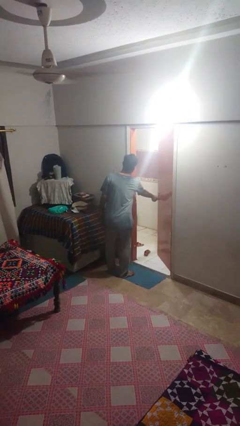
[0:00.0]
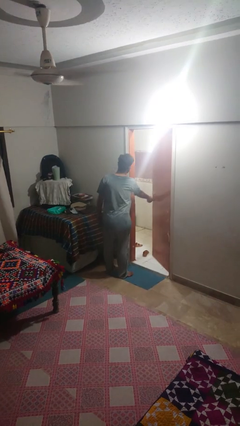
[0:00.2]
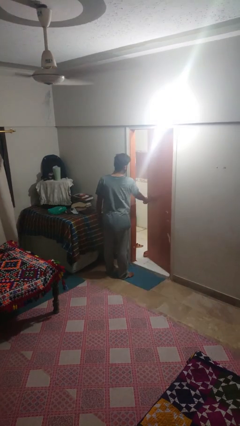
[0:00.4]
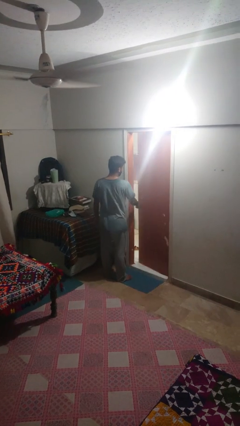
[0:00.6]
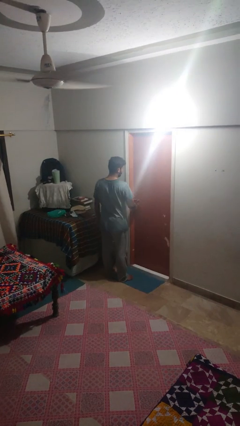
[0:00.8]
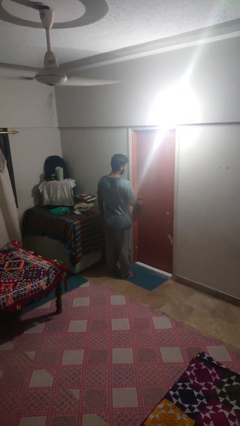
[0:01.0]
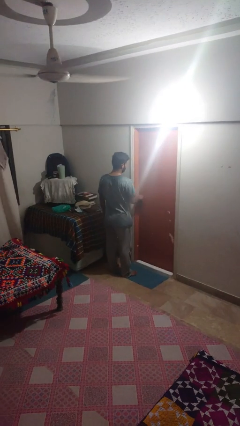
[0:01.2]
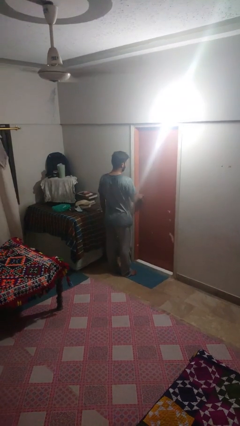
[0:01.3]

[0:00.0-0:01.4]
person closes facility door

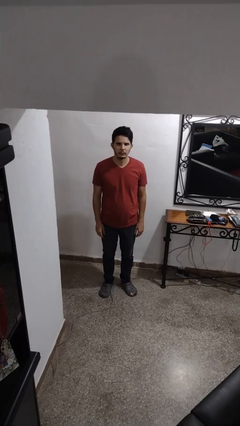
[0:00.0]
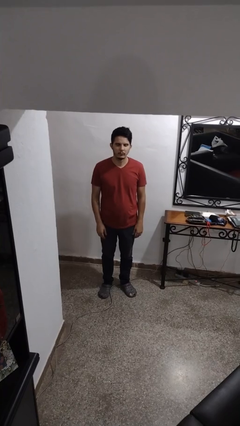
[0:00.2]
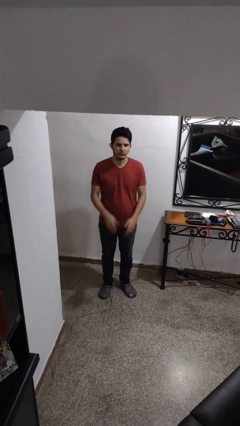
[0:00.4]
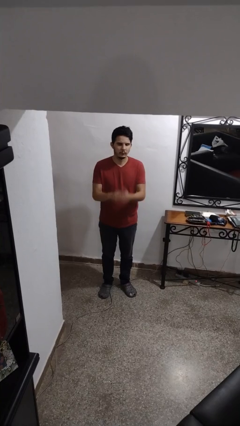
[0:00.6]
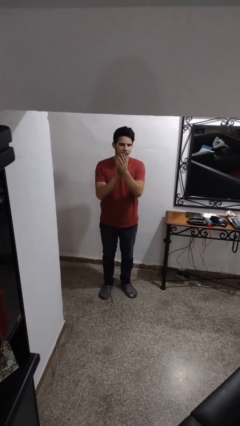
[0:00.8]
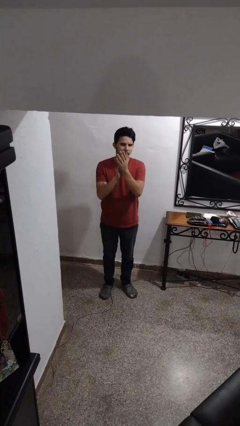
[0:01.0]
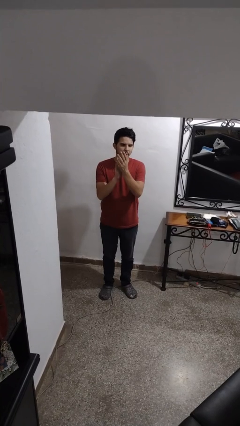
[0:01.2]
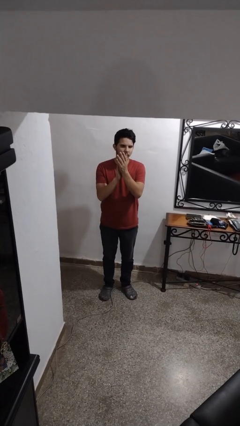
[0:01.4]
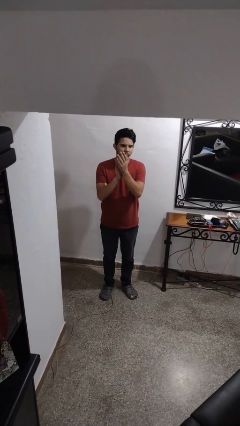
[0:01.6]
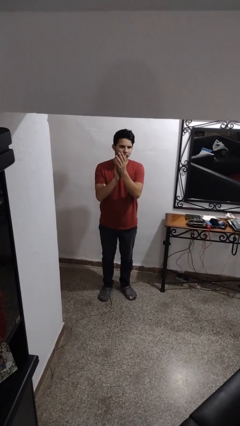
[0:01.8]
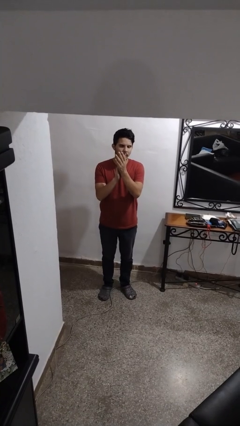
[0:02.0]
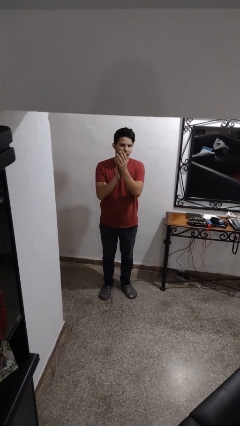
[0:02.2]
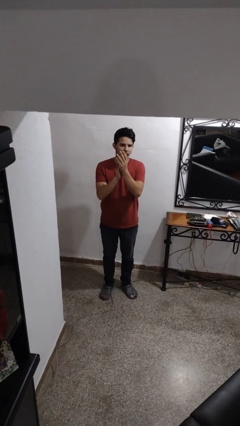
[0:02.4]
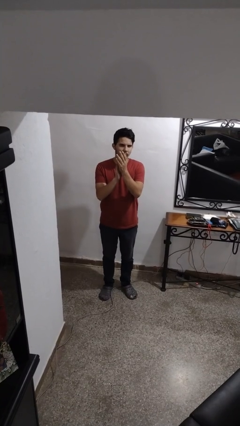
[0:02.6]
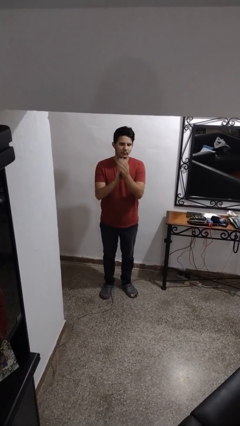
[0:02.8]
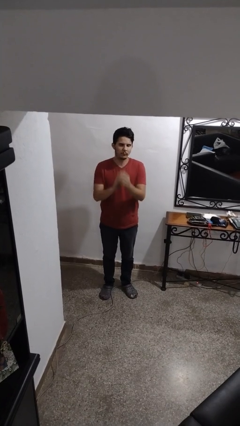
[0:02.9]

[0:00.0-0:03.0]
person claps hands

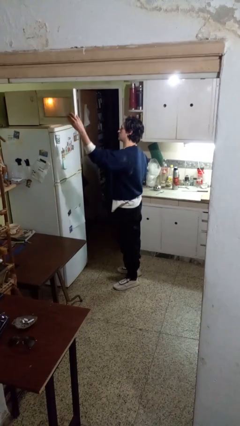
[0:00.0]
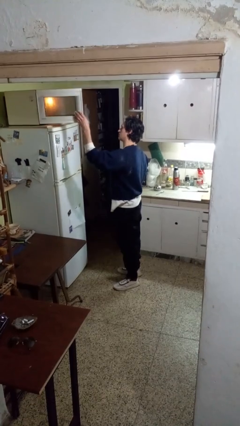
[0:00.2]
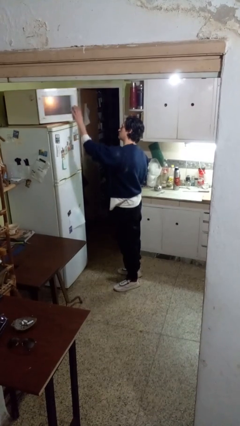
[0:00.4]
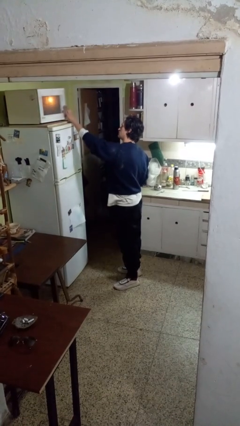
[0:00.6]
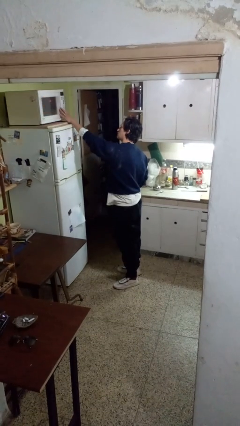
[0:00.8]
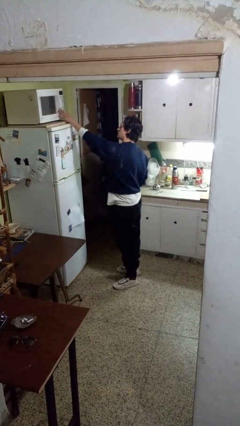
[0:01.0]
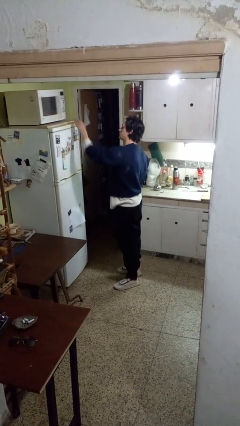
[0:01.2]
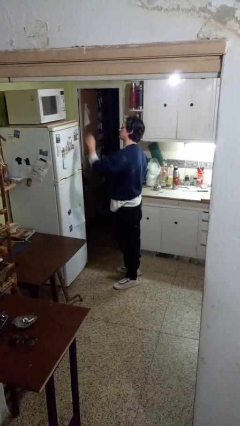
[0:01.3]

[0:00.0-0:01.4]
person closes microwave

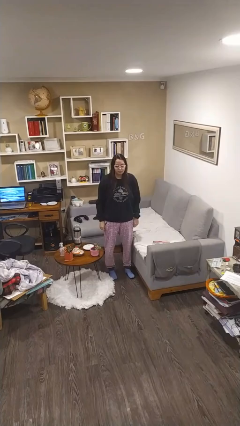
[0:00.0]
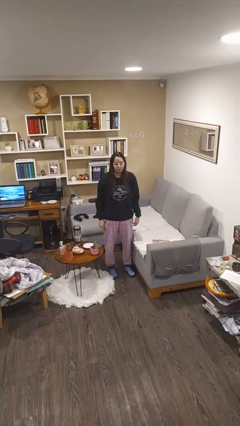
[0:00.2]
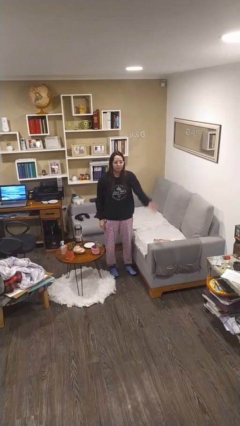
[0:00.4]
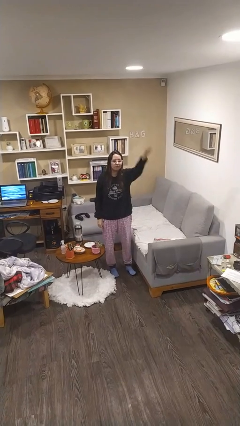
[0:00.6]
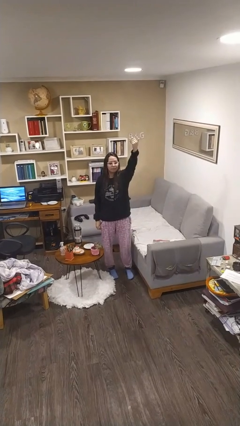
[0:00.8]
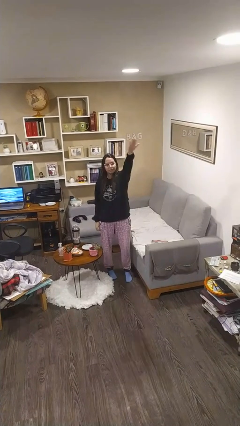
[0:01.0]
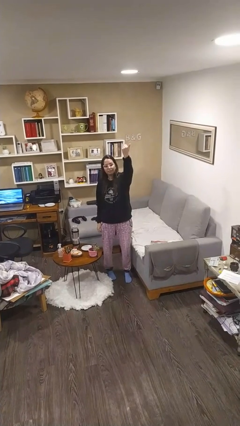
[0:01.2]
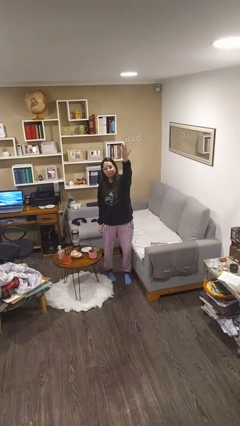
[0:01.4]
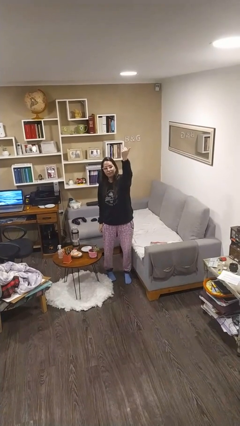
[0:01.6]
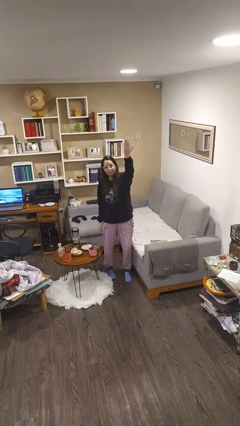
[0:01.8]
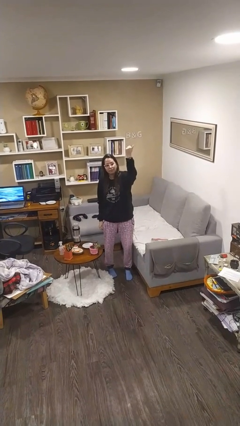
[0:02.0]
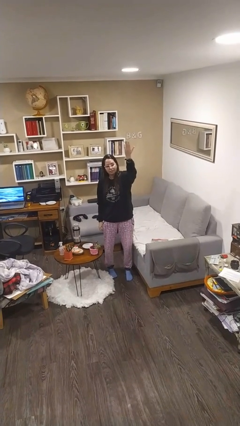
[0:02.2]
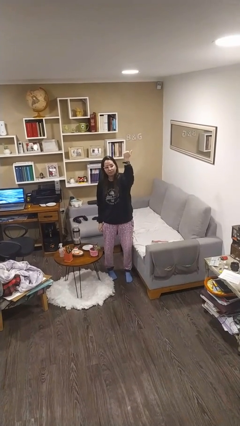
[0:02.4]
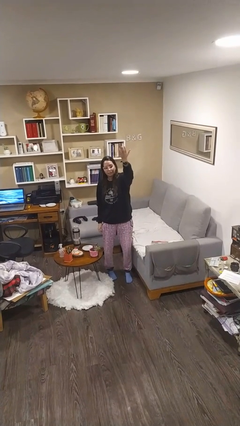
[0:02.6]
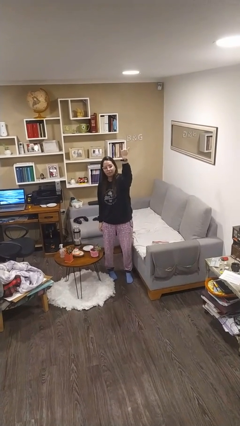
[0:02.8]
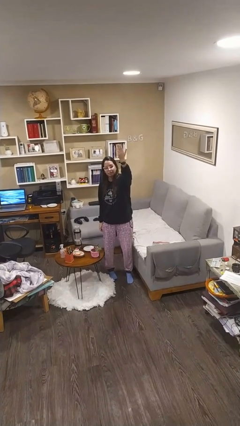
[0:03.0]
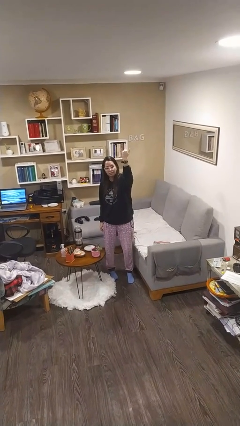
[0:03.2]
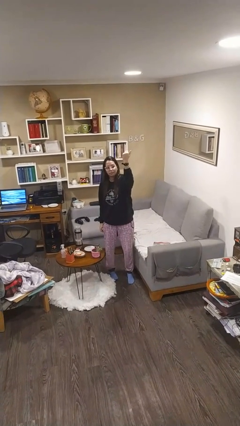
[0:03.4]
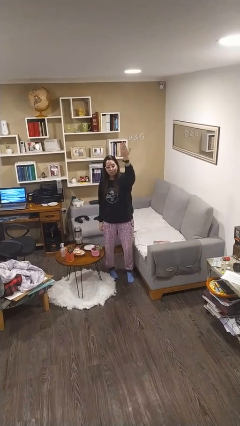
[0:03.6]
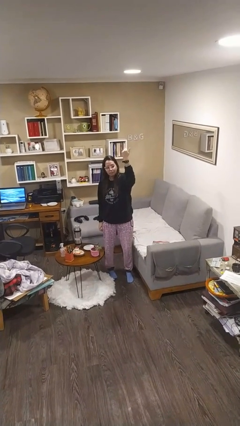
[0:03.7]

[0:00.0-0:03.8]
person gestures come here

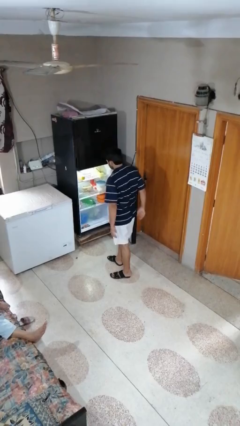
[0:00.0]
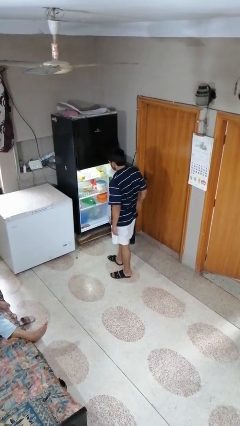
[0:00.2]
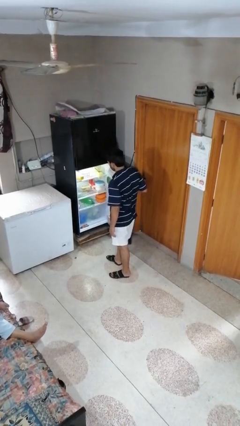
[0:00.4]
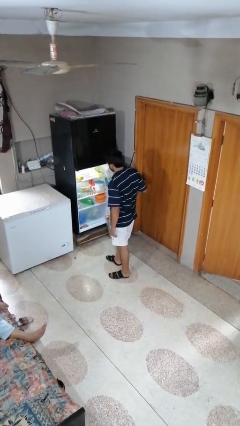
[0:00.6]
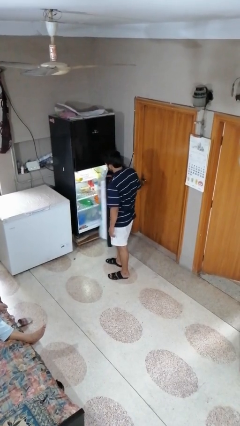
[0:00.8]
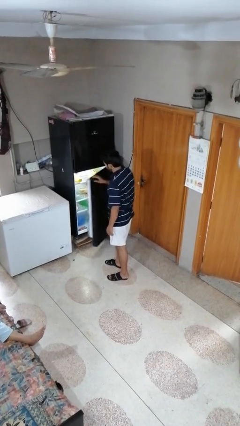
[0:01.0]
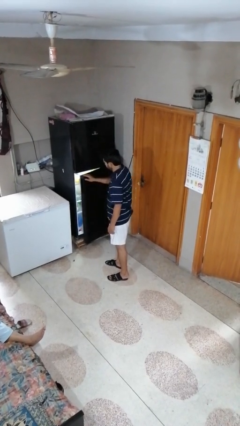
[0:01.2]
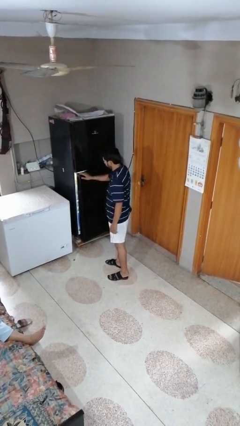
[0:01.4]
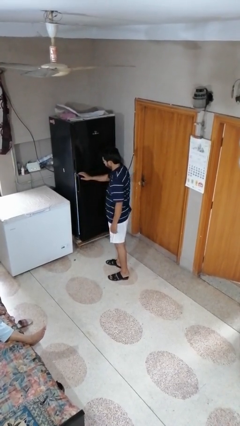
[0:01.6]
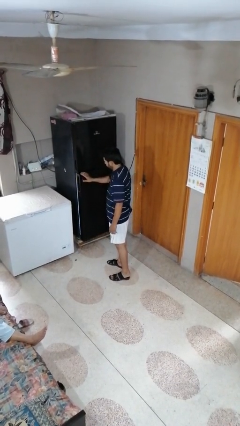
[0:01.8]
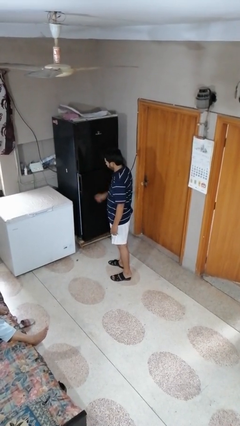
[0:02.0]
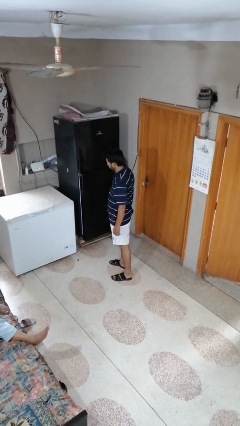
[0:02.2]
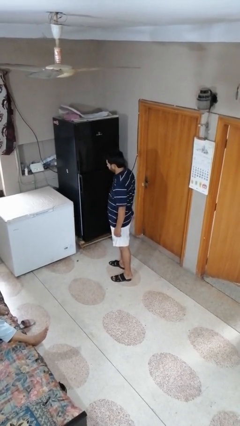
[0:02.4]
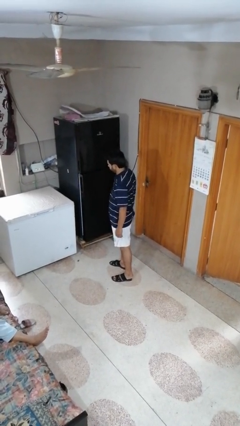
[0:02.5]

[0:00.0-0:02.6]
person closes refrigerator

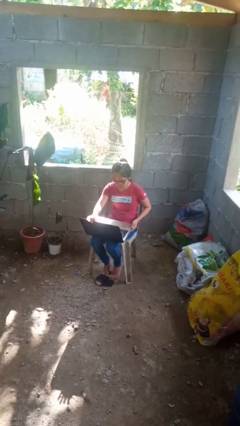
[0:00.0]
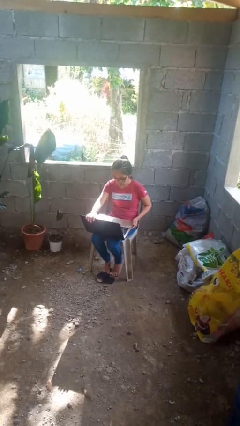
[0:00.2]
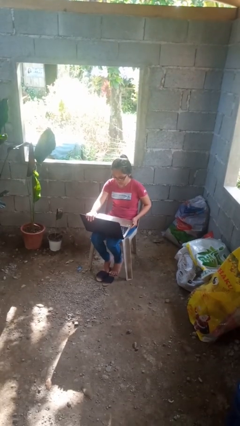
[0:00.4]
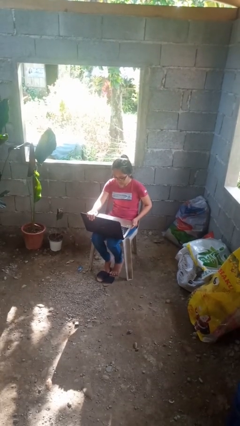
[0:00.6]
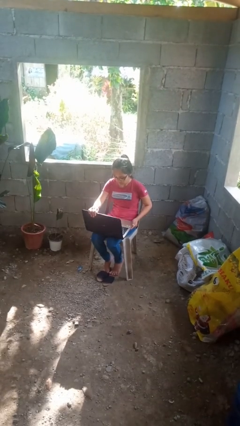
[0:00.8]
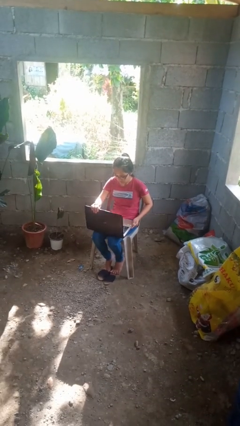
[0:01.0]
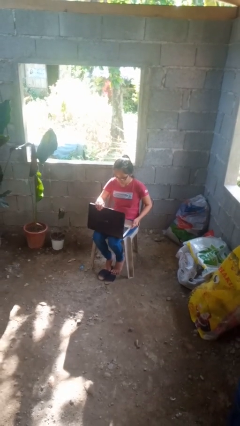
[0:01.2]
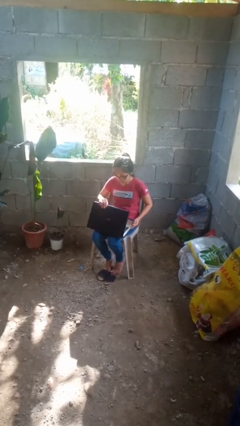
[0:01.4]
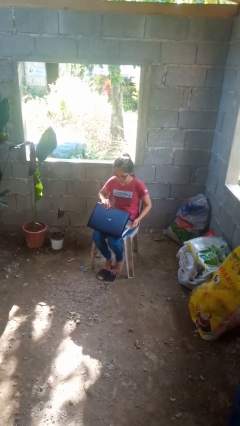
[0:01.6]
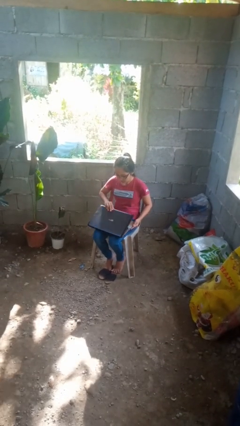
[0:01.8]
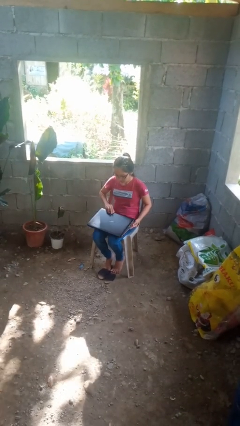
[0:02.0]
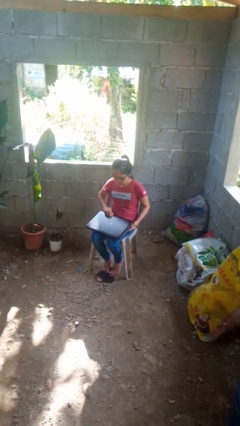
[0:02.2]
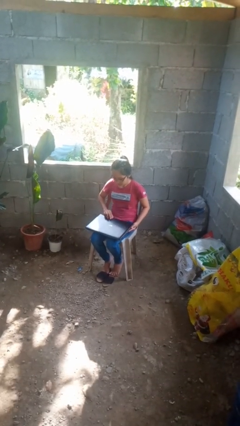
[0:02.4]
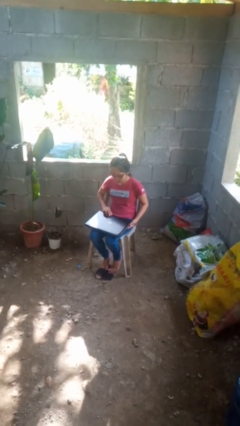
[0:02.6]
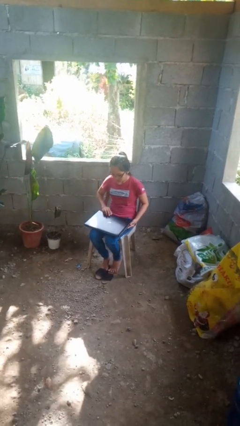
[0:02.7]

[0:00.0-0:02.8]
person closes laptop

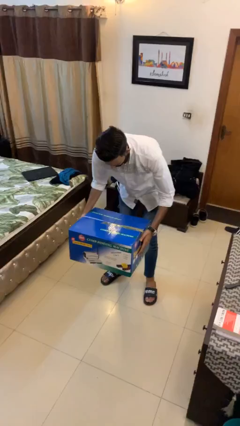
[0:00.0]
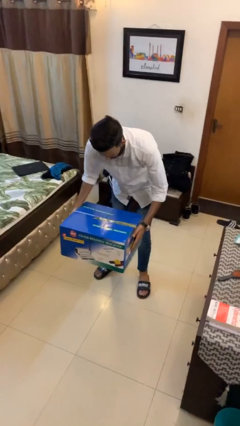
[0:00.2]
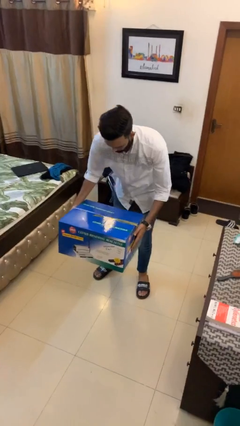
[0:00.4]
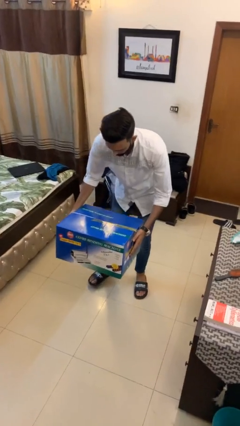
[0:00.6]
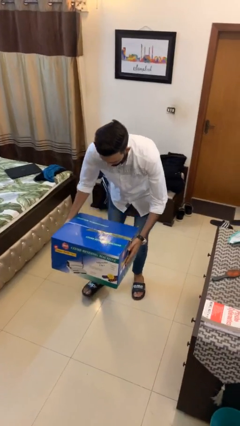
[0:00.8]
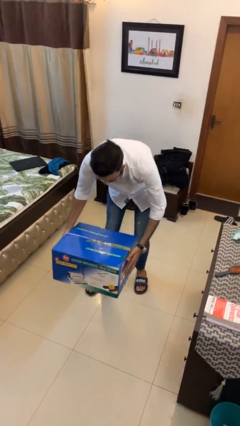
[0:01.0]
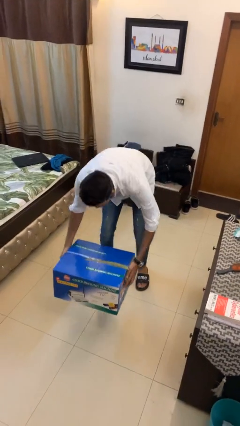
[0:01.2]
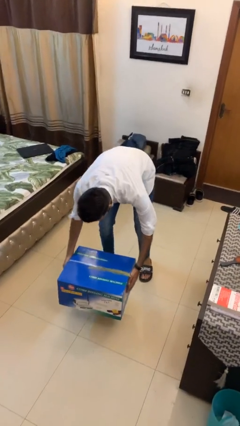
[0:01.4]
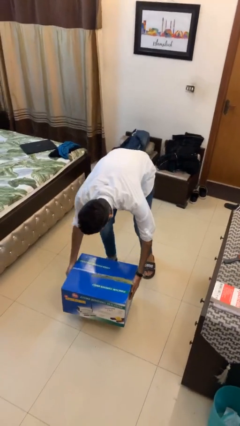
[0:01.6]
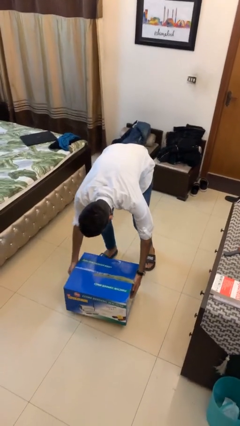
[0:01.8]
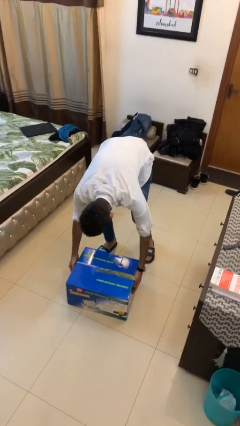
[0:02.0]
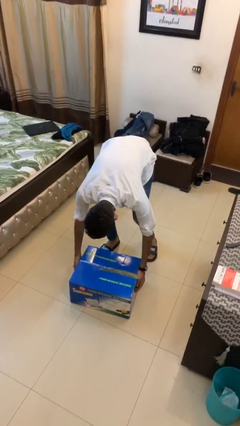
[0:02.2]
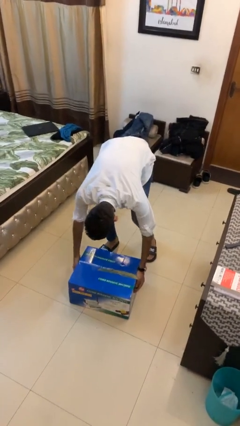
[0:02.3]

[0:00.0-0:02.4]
person puts down object on floor
